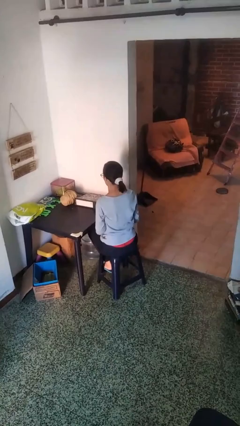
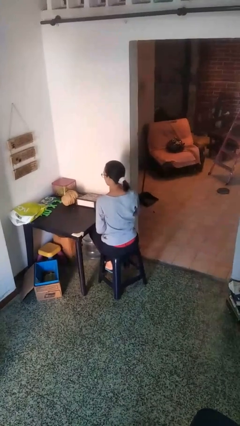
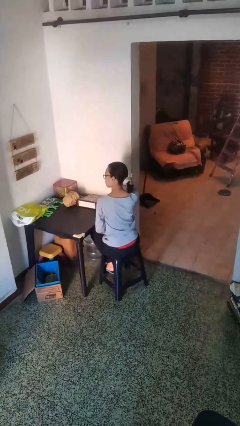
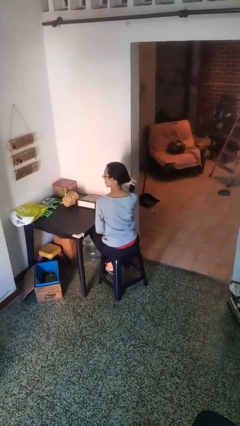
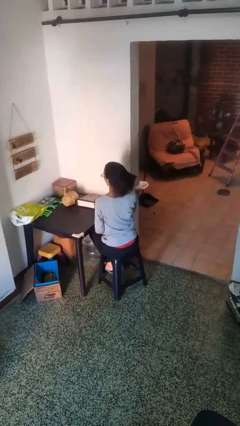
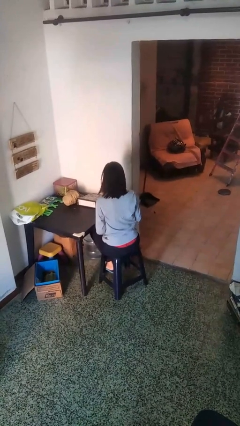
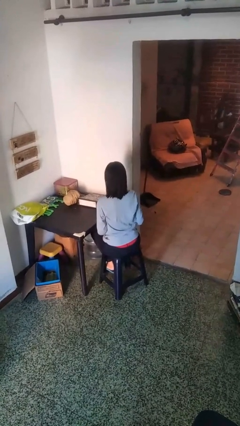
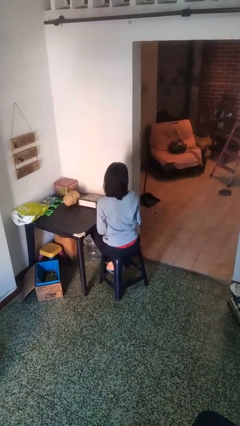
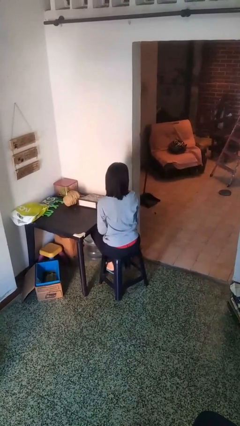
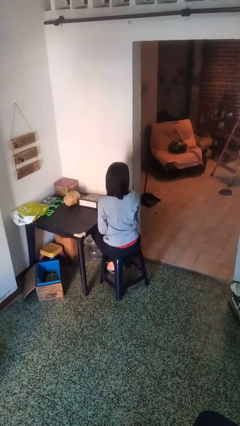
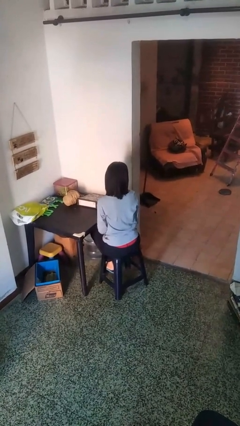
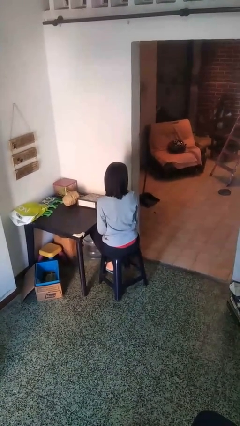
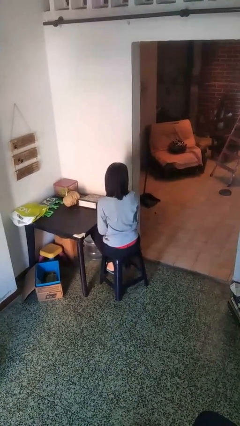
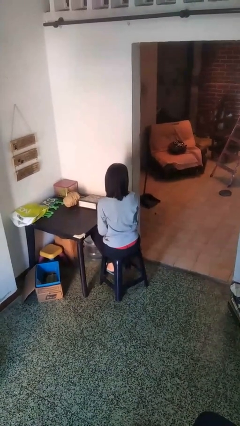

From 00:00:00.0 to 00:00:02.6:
person takes off hairtie

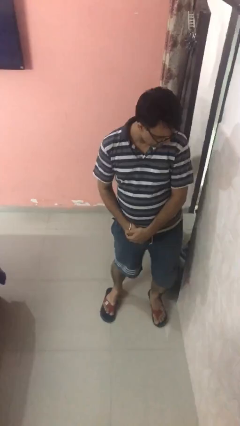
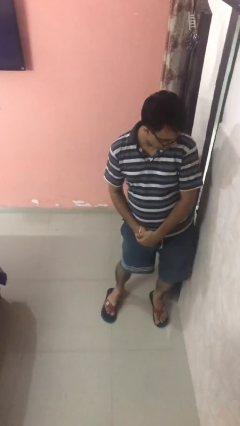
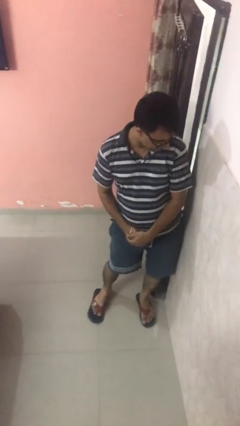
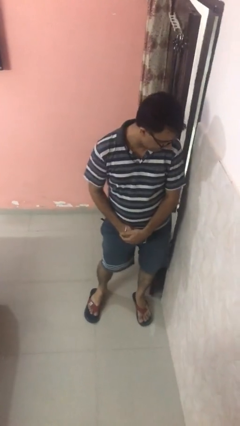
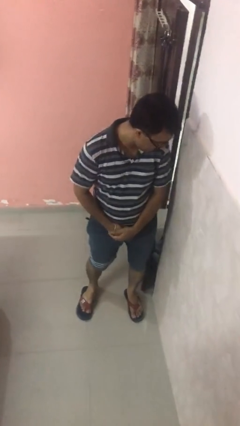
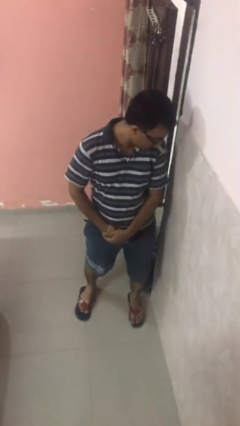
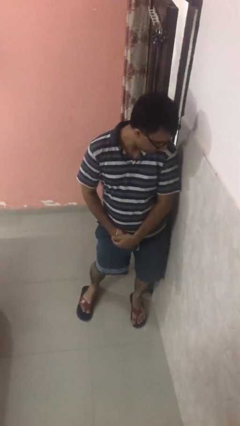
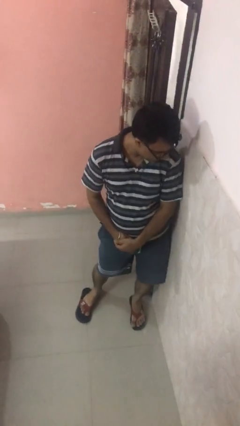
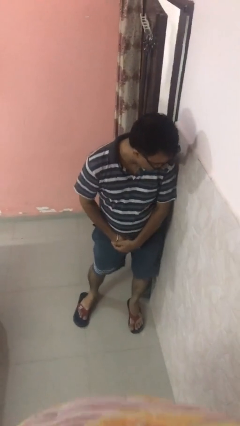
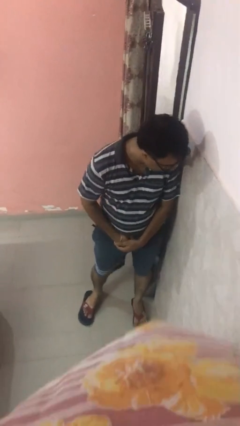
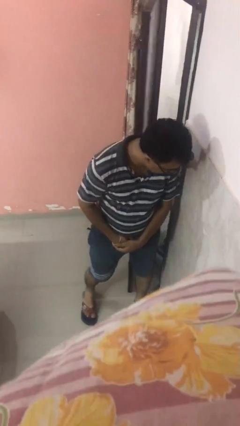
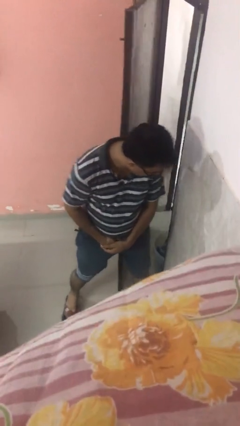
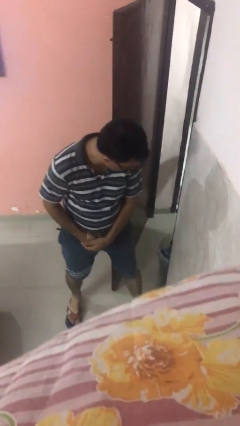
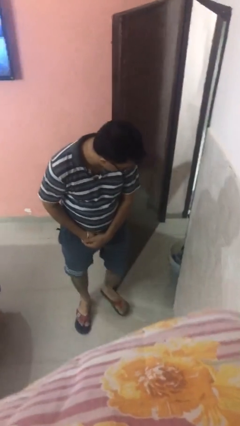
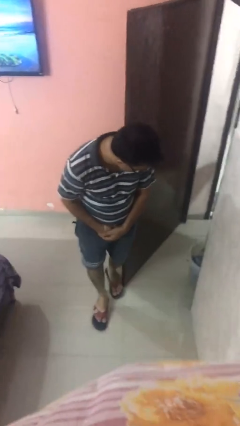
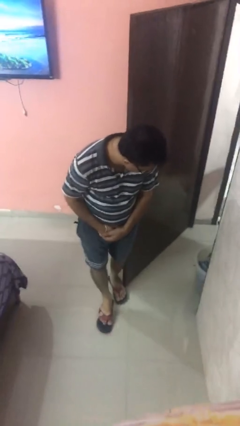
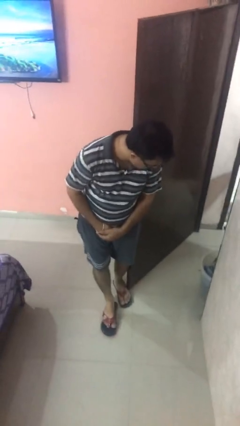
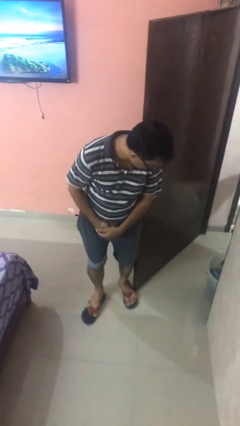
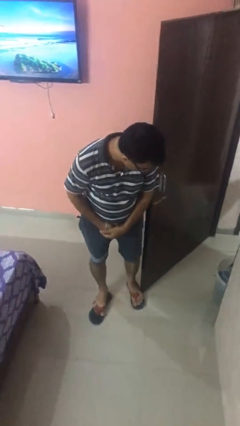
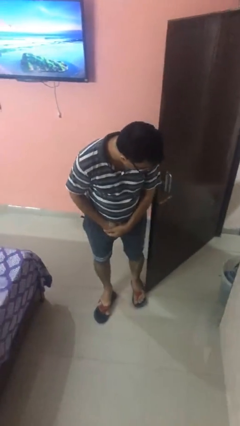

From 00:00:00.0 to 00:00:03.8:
person opens facility door

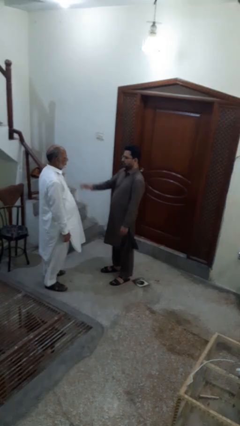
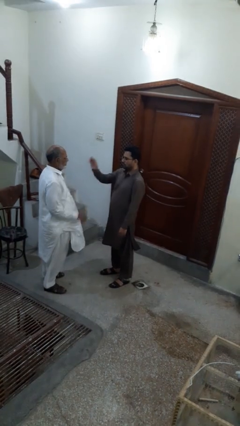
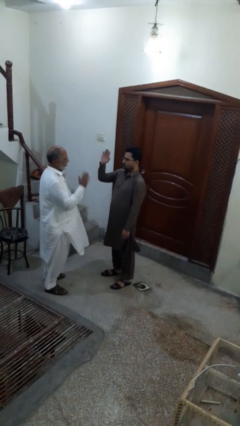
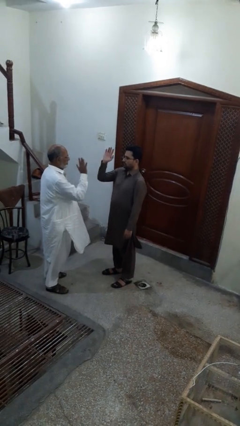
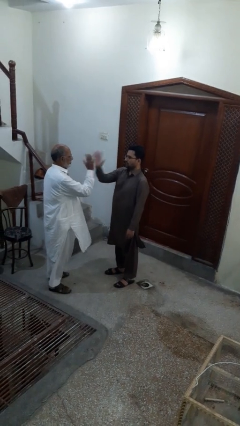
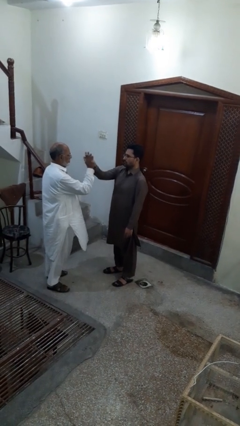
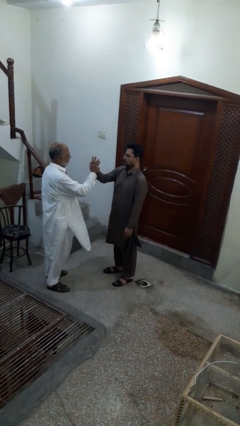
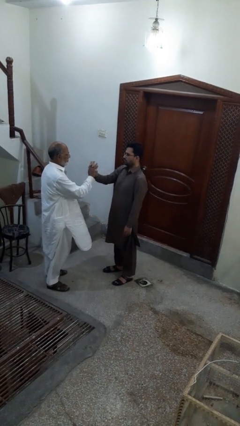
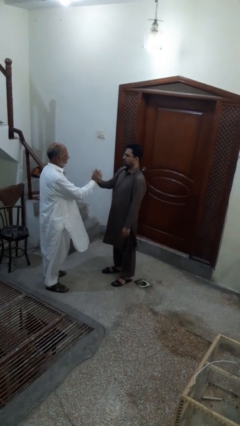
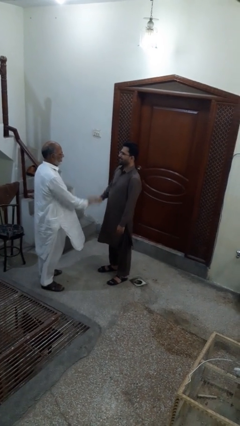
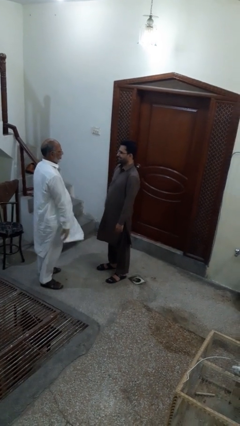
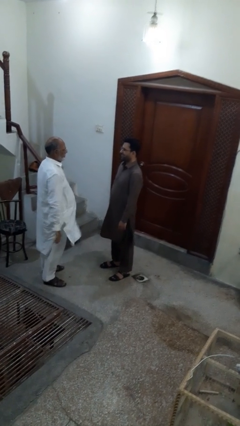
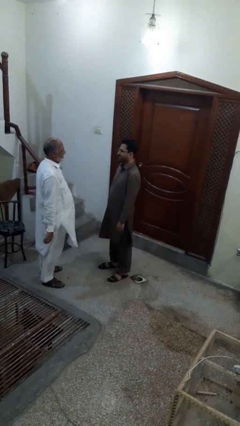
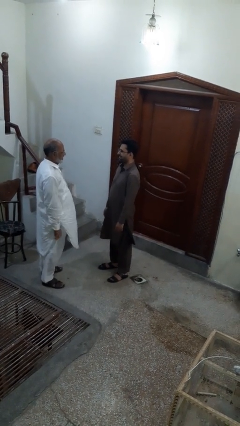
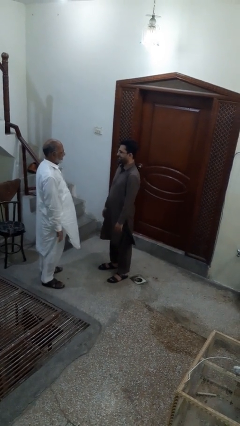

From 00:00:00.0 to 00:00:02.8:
person highfives hand

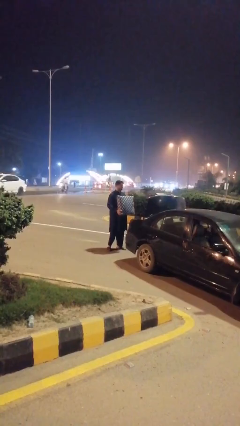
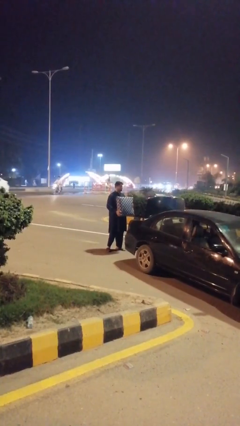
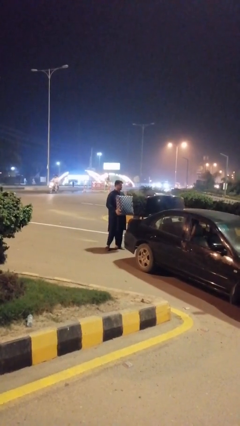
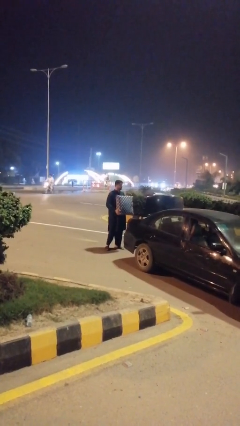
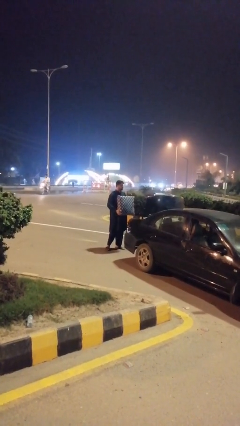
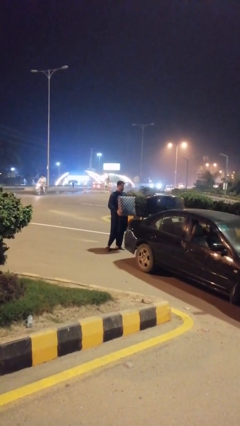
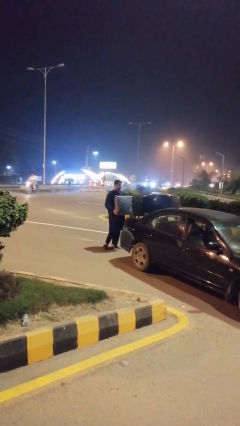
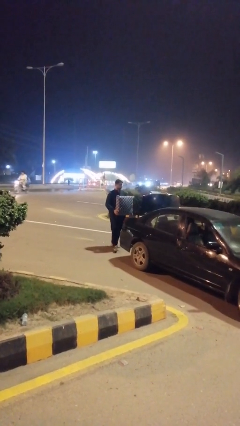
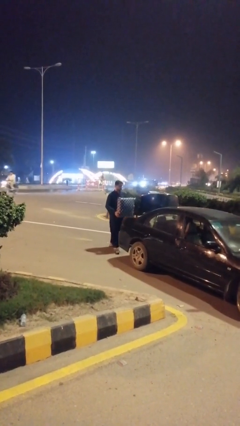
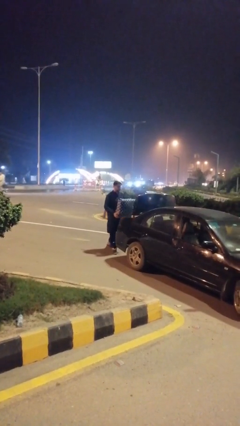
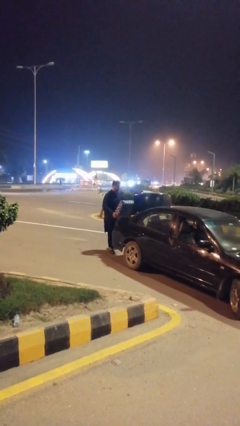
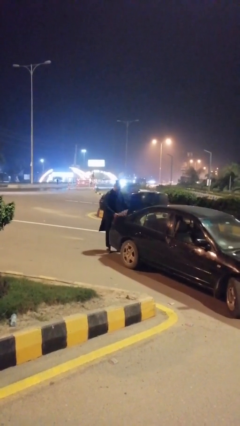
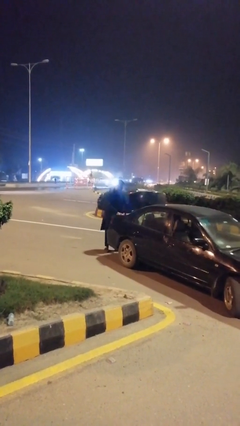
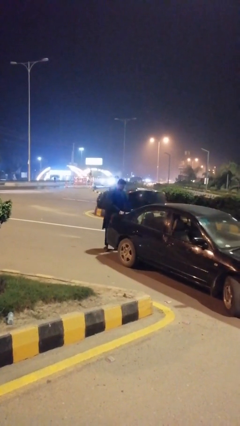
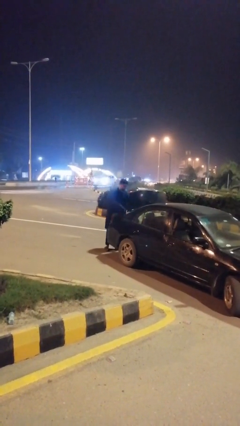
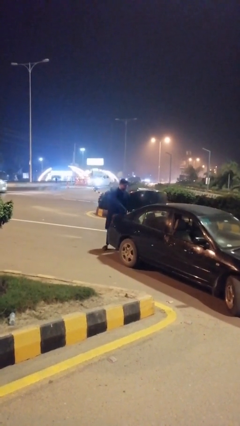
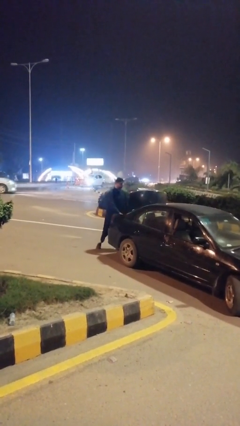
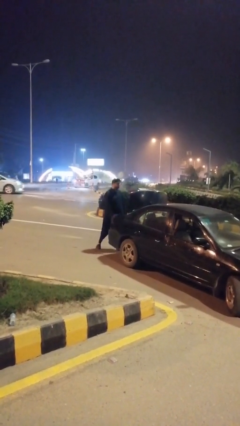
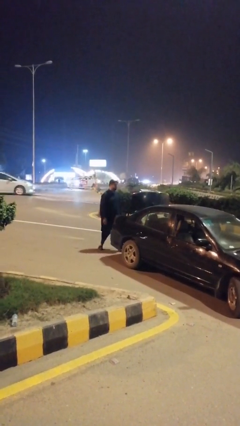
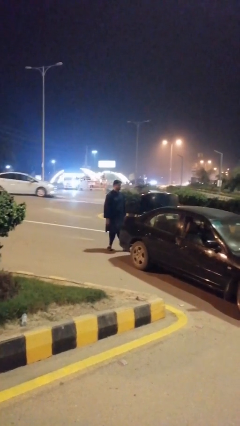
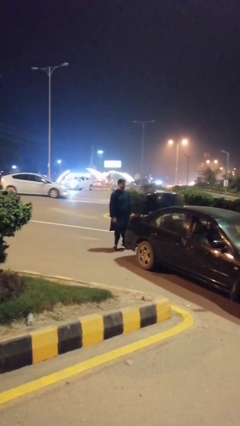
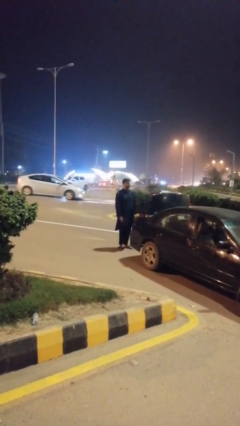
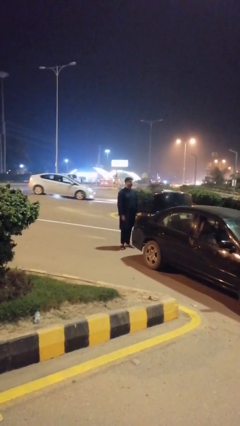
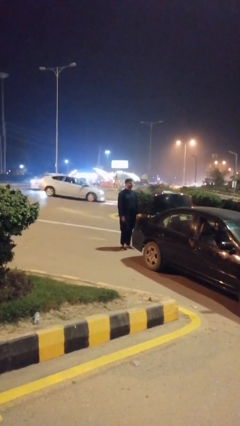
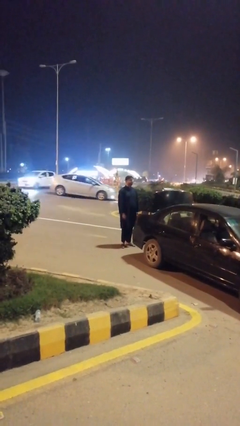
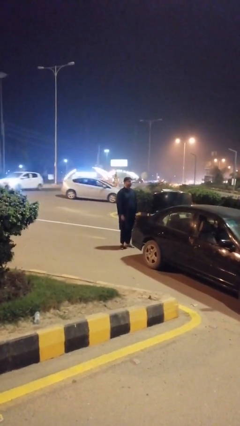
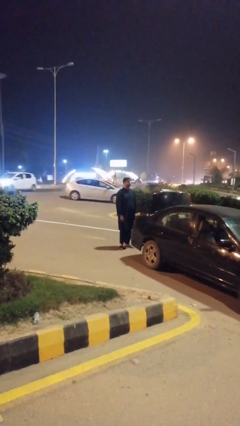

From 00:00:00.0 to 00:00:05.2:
person loads car

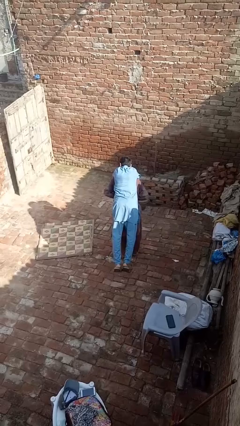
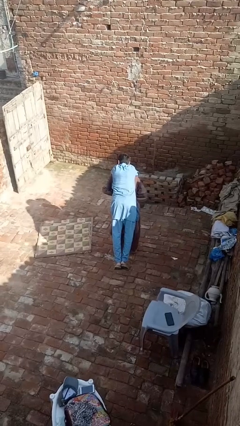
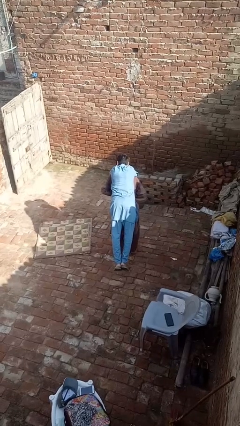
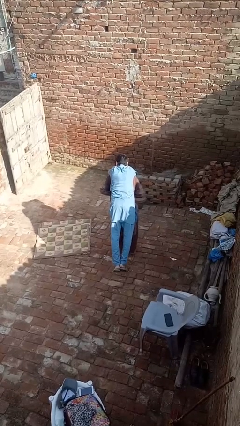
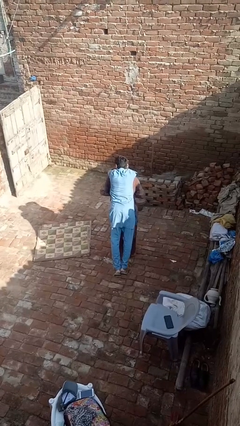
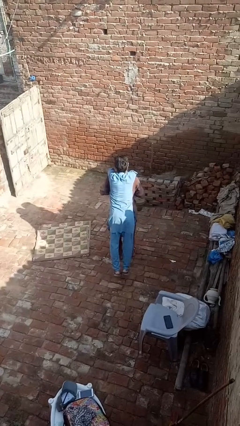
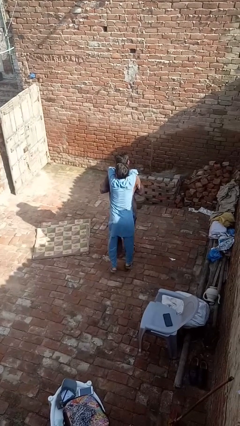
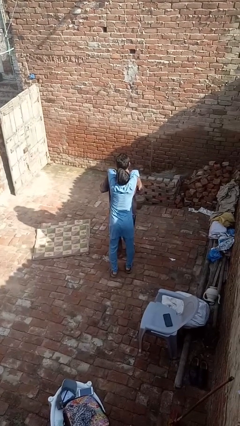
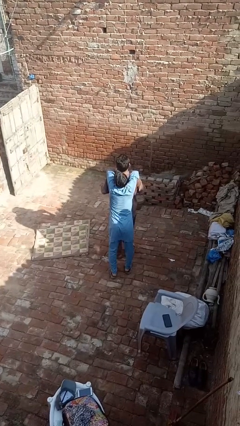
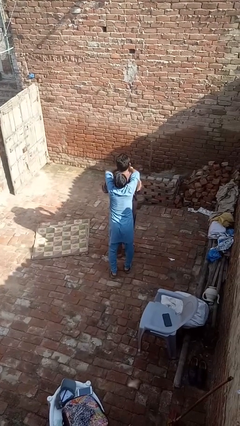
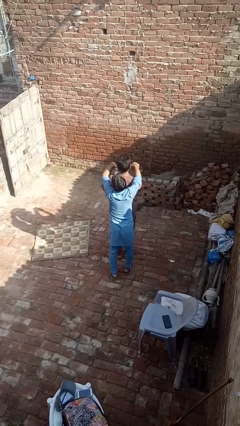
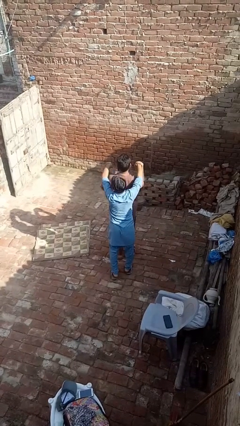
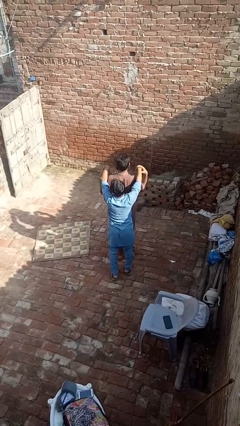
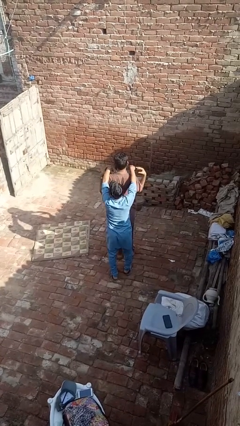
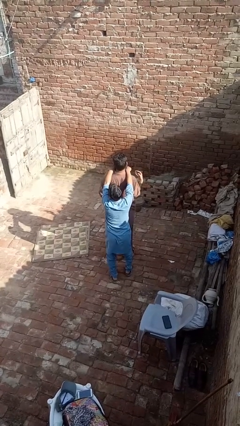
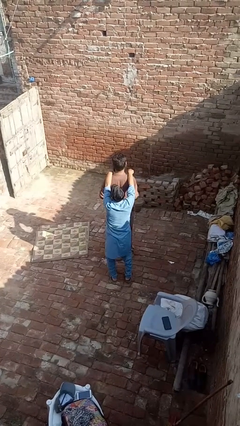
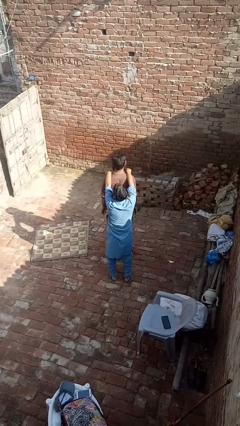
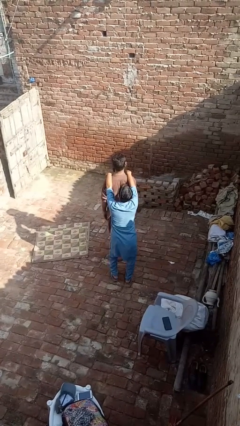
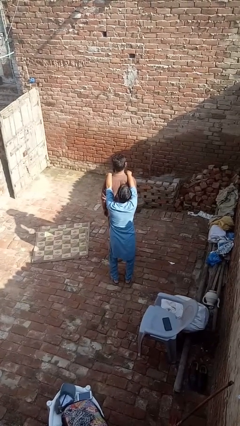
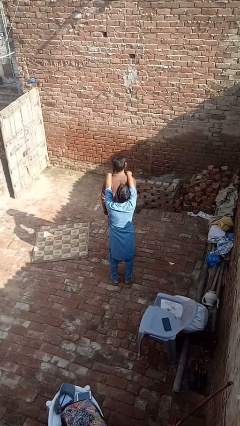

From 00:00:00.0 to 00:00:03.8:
person puts down person
